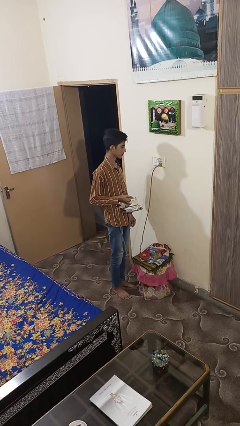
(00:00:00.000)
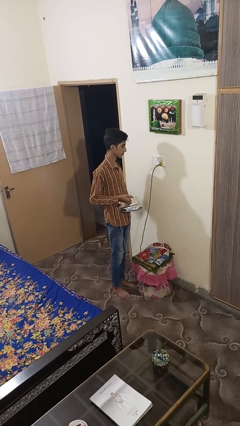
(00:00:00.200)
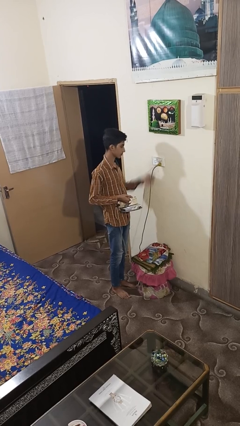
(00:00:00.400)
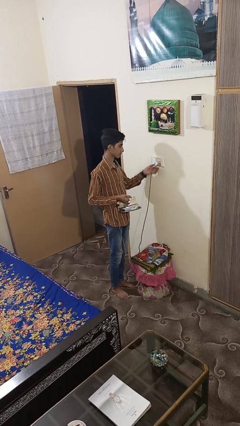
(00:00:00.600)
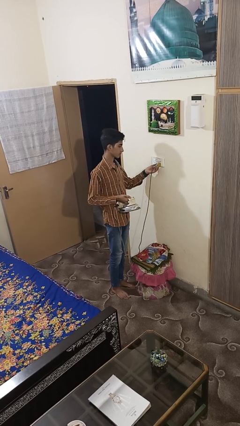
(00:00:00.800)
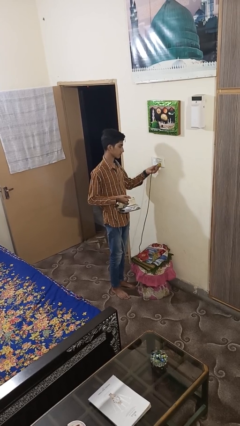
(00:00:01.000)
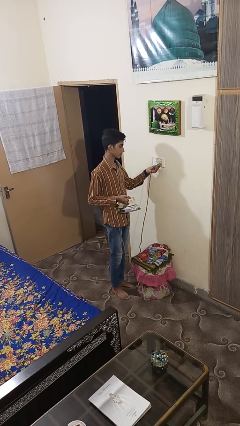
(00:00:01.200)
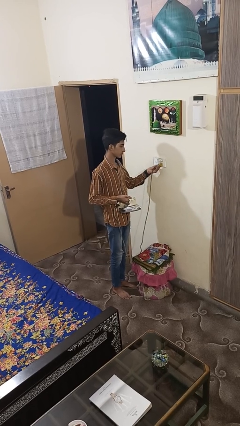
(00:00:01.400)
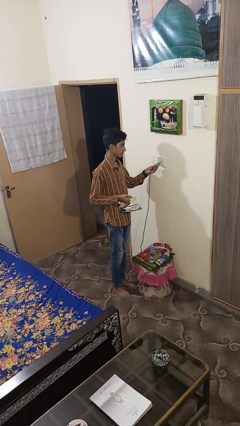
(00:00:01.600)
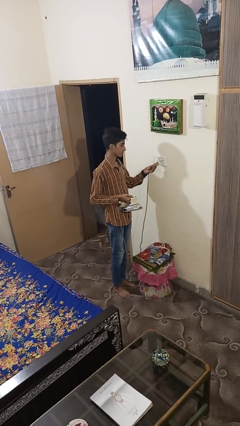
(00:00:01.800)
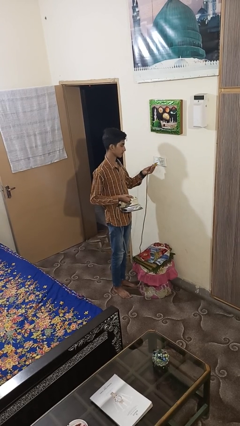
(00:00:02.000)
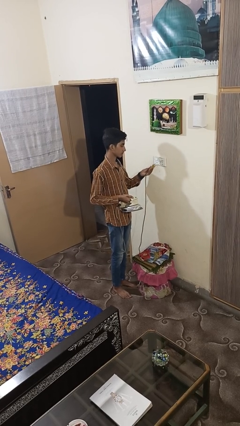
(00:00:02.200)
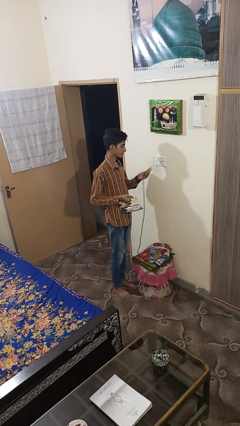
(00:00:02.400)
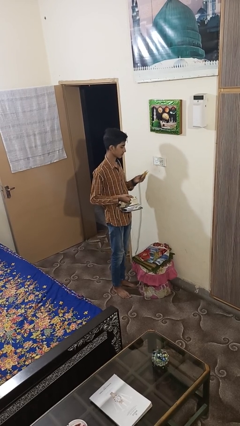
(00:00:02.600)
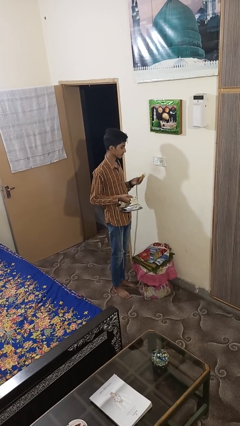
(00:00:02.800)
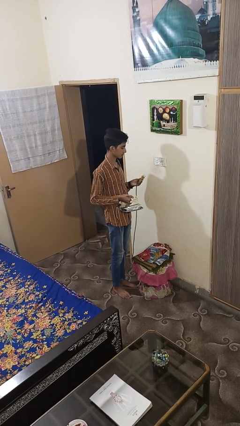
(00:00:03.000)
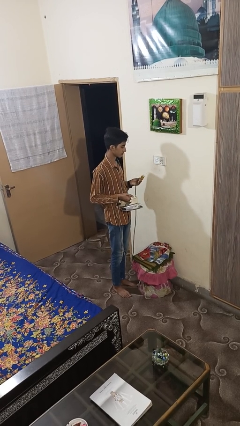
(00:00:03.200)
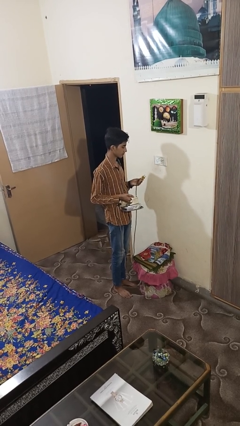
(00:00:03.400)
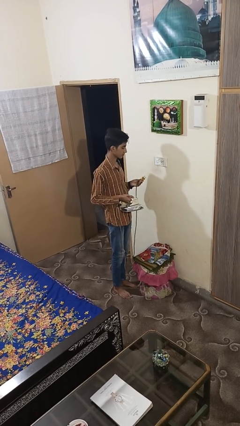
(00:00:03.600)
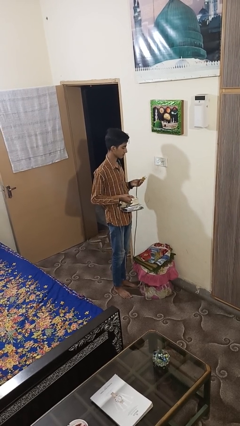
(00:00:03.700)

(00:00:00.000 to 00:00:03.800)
person unplugs from electrical socket

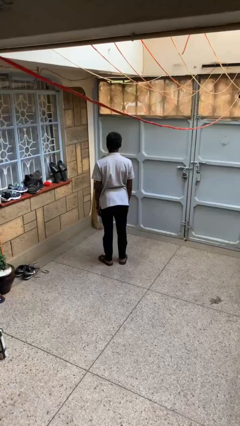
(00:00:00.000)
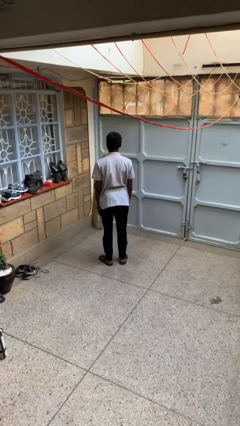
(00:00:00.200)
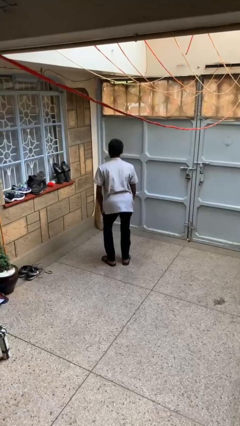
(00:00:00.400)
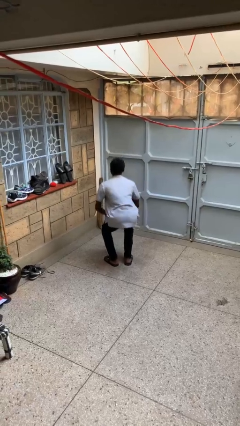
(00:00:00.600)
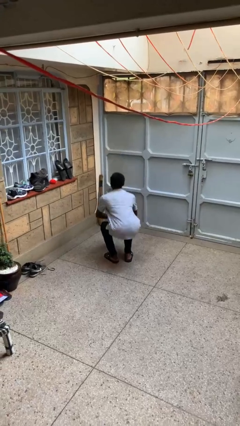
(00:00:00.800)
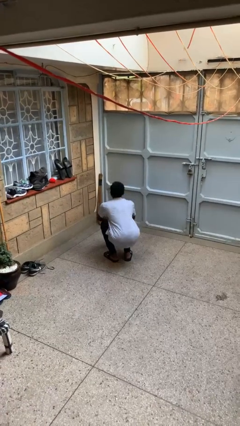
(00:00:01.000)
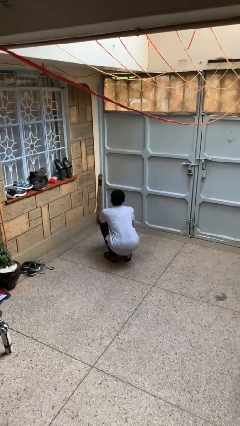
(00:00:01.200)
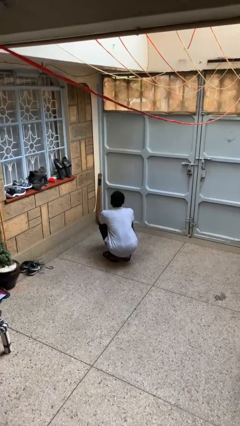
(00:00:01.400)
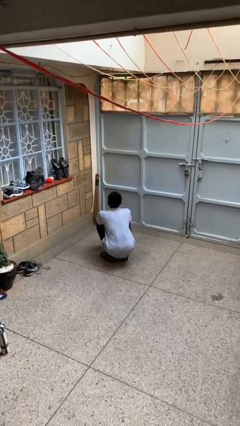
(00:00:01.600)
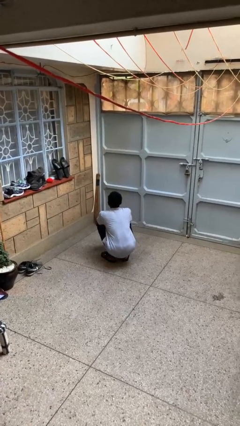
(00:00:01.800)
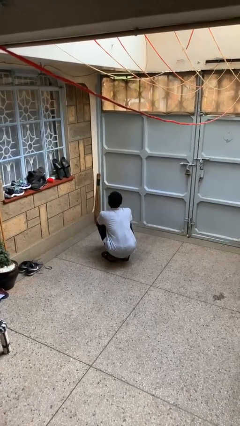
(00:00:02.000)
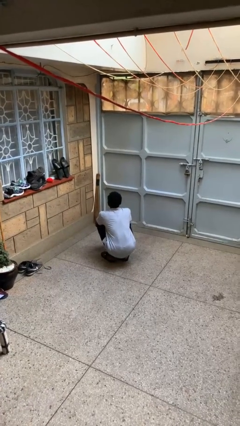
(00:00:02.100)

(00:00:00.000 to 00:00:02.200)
person squats

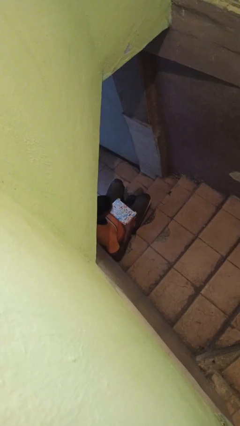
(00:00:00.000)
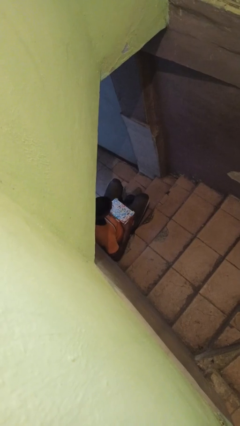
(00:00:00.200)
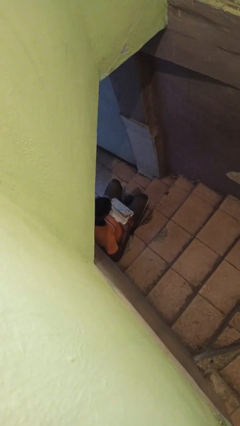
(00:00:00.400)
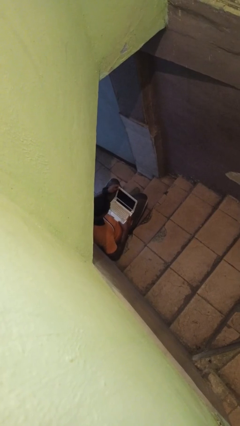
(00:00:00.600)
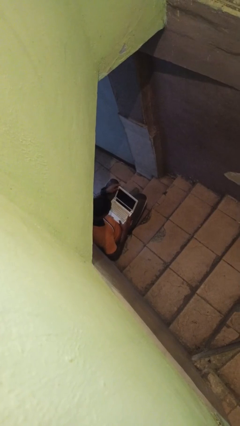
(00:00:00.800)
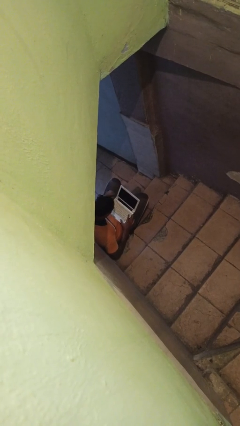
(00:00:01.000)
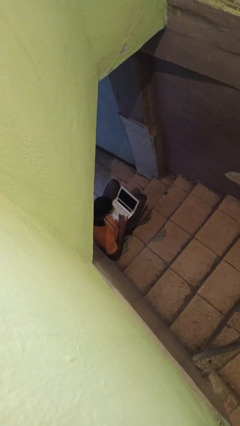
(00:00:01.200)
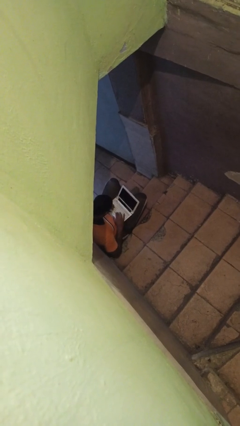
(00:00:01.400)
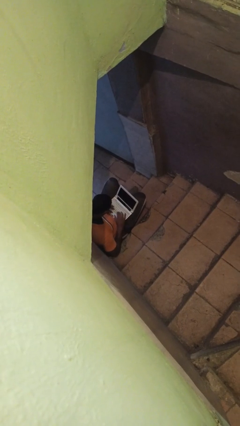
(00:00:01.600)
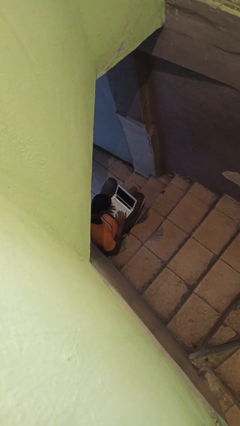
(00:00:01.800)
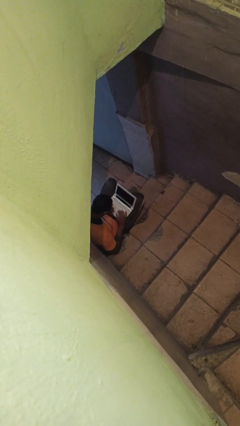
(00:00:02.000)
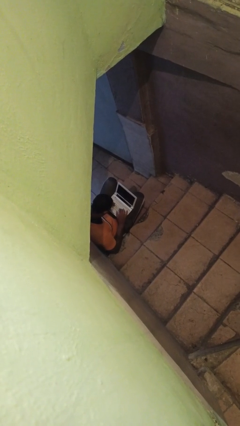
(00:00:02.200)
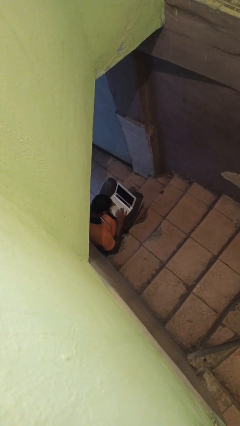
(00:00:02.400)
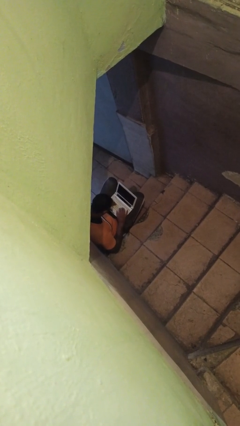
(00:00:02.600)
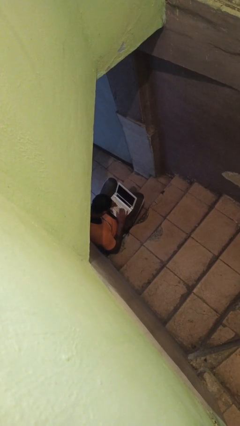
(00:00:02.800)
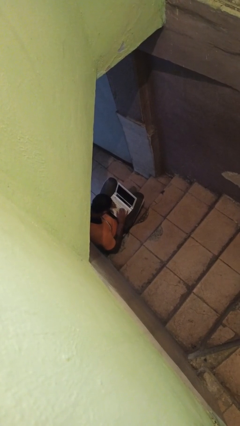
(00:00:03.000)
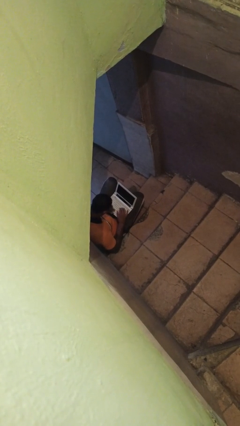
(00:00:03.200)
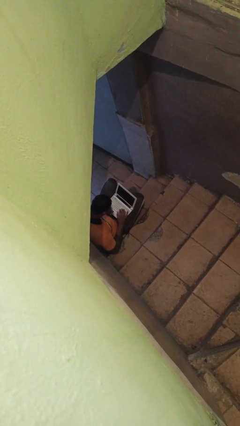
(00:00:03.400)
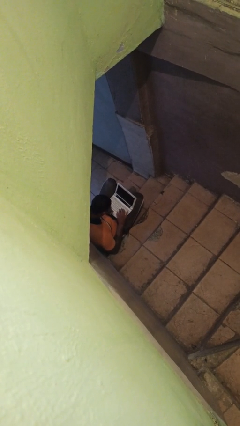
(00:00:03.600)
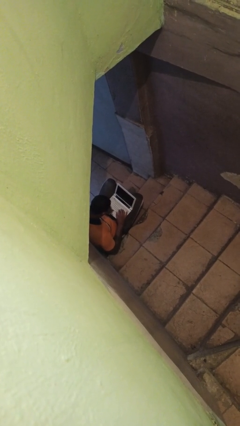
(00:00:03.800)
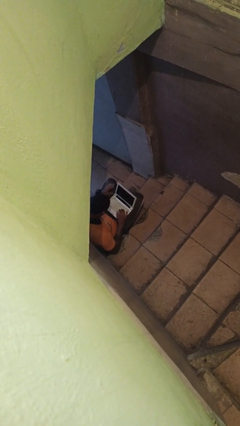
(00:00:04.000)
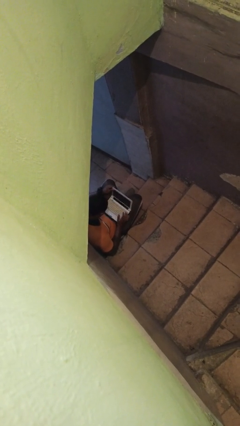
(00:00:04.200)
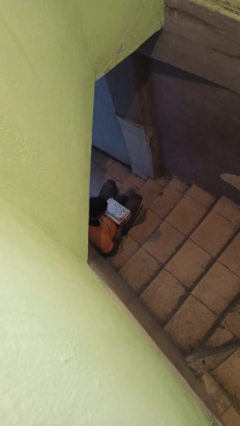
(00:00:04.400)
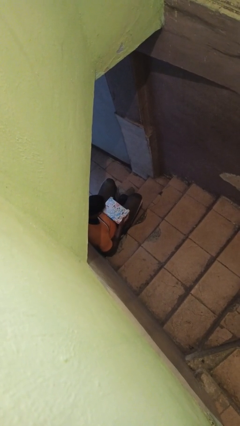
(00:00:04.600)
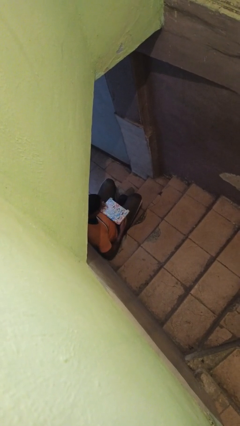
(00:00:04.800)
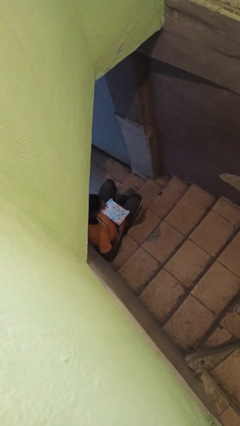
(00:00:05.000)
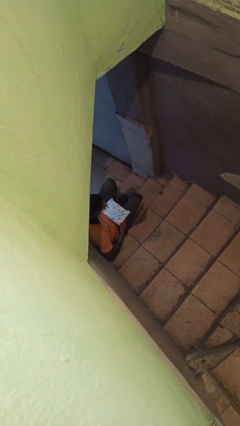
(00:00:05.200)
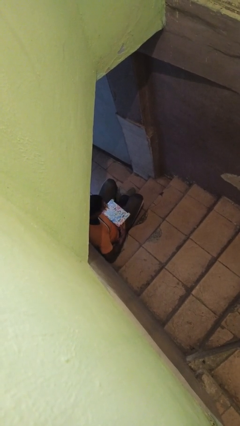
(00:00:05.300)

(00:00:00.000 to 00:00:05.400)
person interacts with laptop

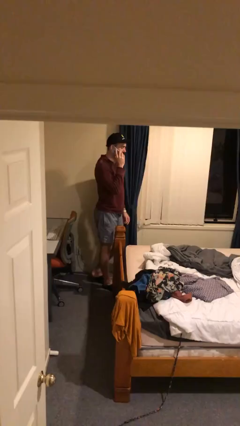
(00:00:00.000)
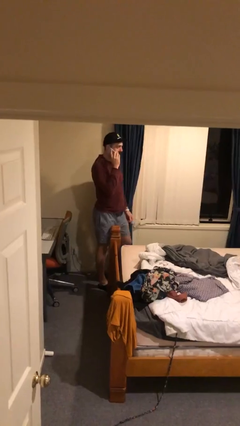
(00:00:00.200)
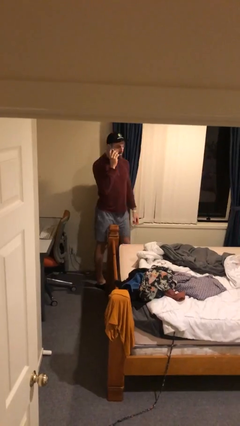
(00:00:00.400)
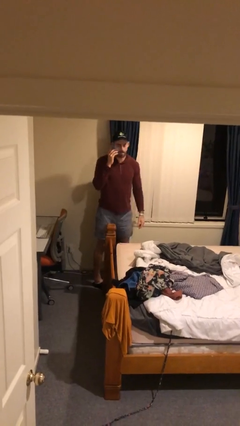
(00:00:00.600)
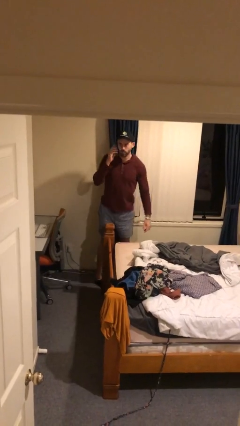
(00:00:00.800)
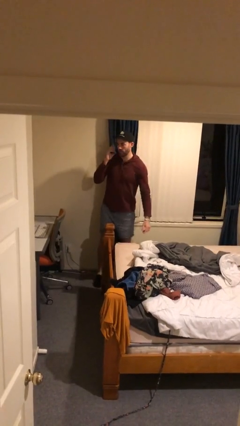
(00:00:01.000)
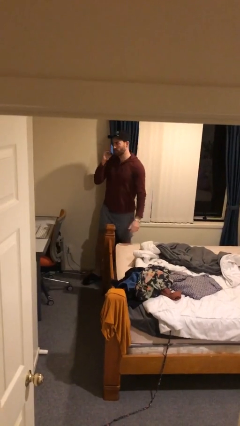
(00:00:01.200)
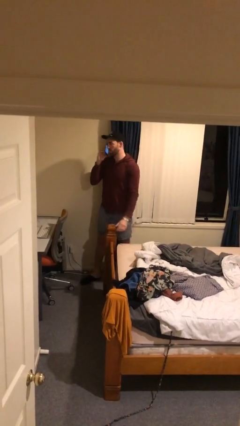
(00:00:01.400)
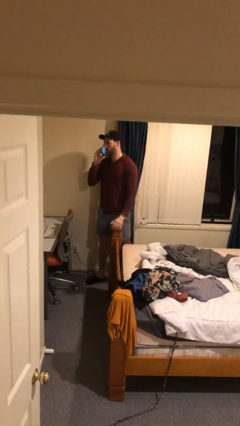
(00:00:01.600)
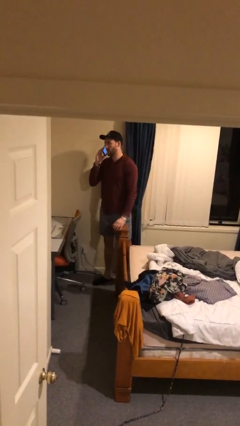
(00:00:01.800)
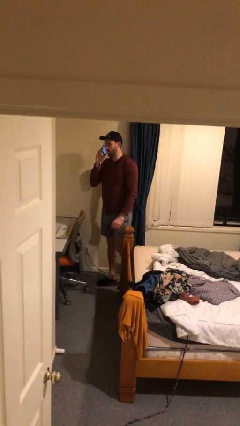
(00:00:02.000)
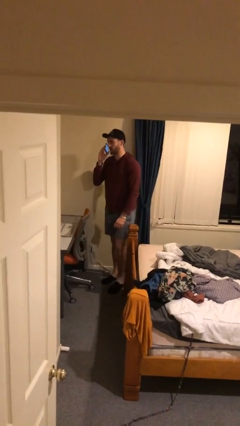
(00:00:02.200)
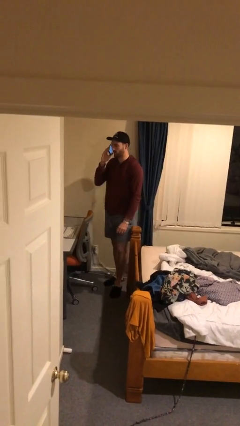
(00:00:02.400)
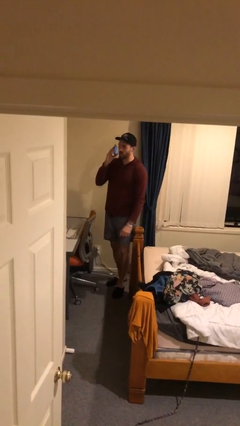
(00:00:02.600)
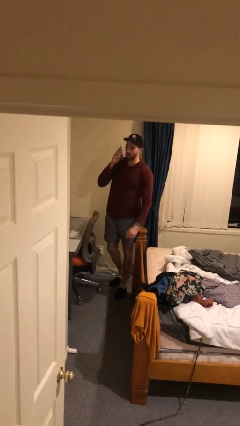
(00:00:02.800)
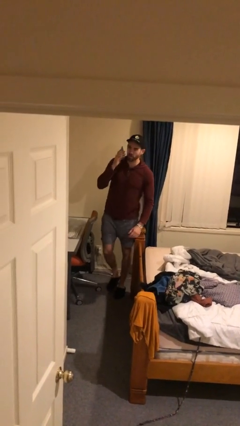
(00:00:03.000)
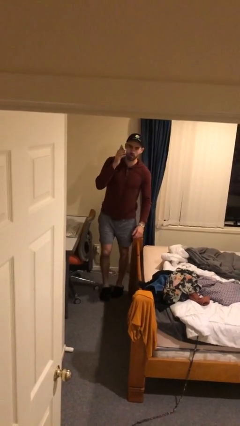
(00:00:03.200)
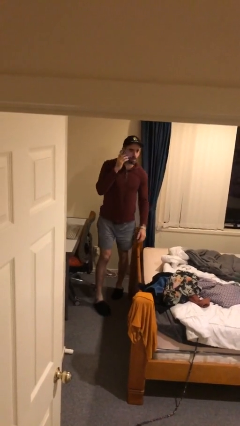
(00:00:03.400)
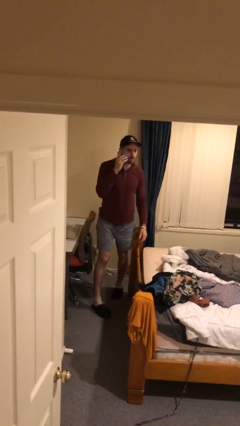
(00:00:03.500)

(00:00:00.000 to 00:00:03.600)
person talks on phone

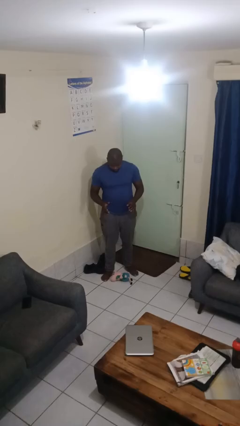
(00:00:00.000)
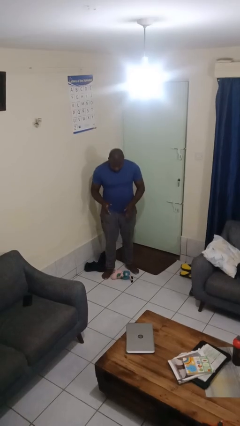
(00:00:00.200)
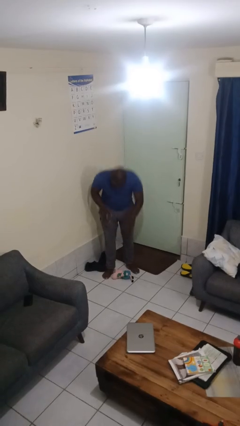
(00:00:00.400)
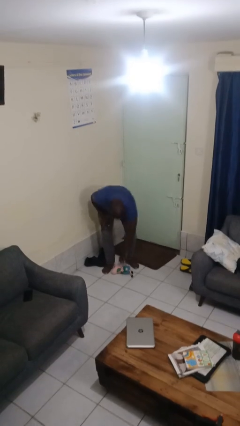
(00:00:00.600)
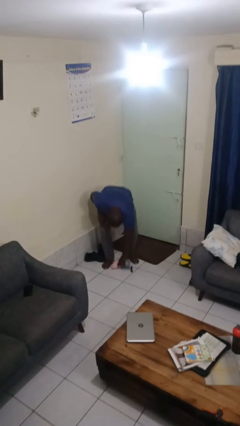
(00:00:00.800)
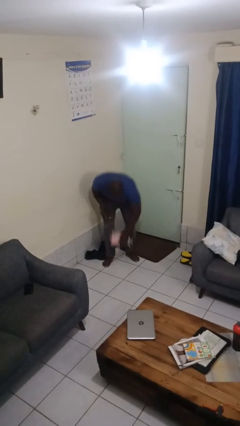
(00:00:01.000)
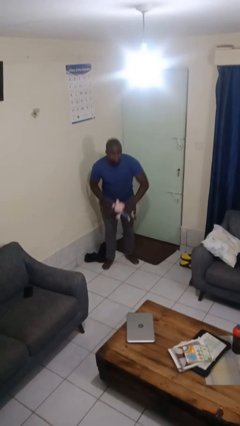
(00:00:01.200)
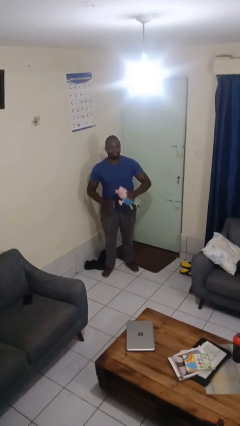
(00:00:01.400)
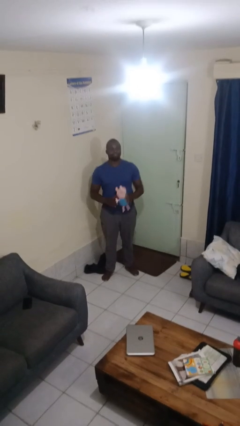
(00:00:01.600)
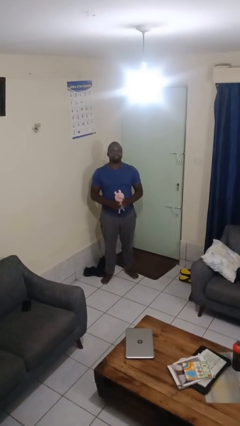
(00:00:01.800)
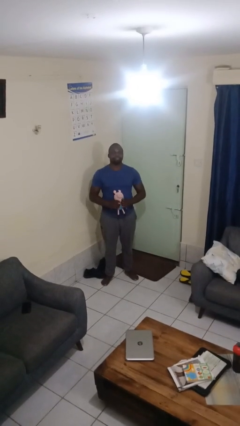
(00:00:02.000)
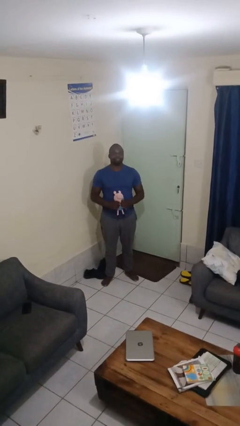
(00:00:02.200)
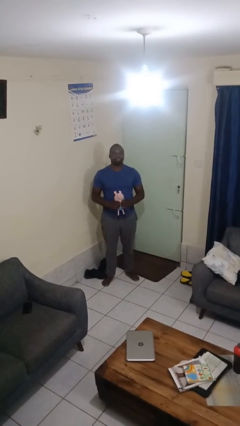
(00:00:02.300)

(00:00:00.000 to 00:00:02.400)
person picks up object from floor
